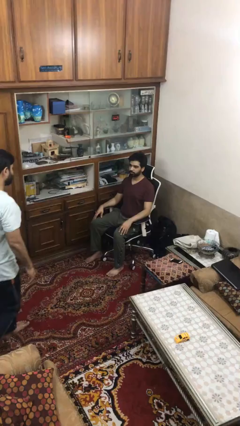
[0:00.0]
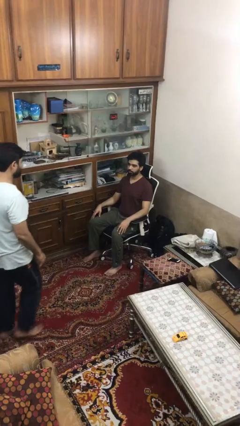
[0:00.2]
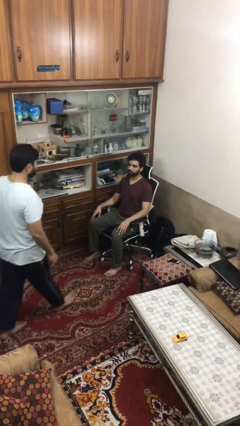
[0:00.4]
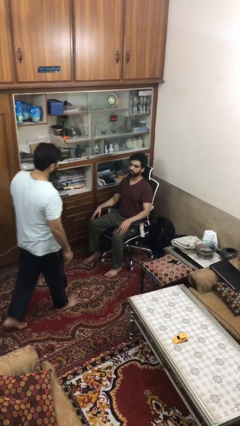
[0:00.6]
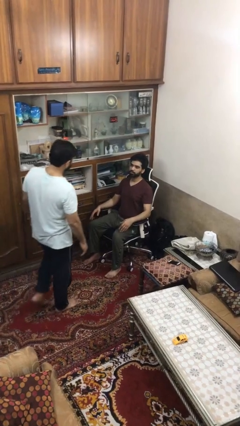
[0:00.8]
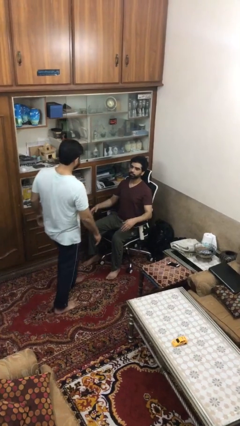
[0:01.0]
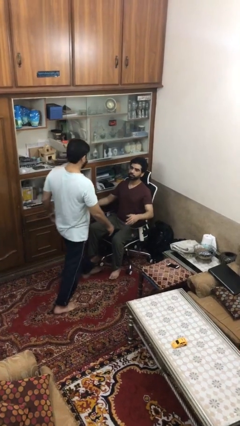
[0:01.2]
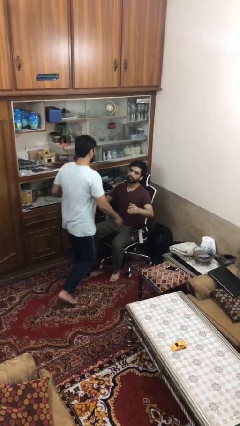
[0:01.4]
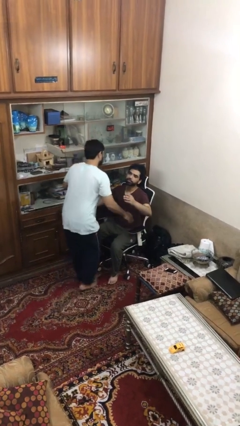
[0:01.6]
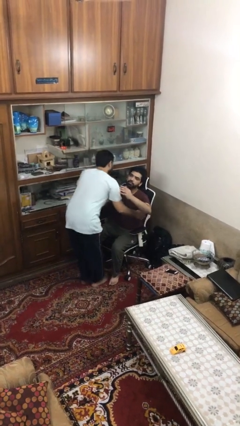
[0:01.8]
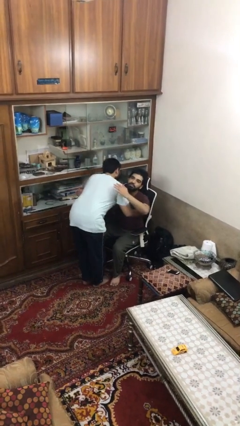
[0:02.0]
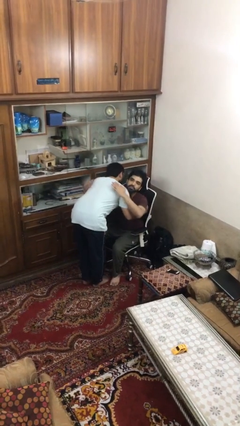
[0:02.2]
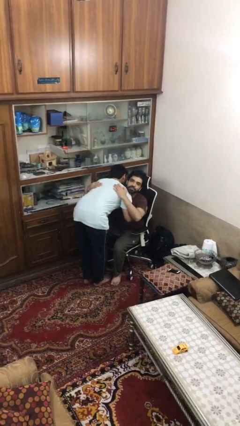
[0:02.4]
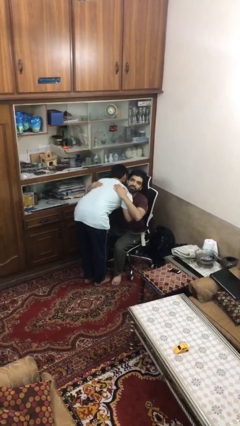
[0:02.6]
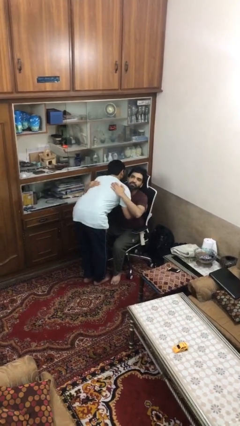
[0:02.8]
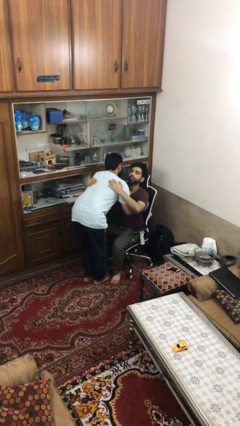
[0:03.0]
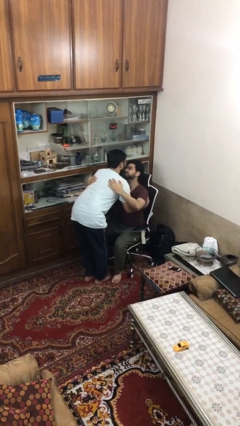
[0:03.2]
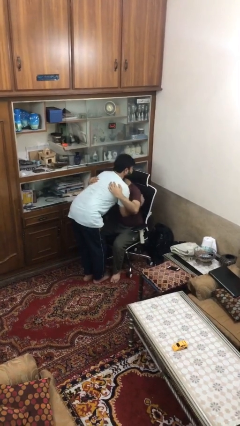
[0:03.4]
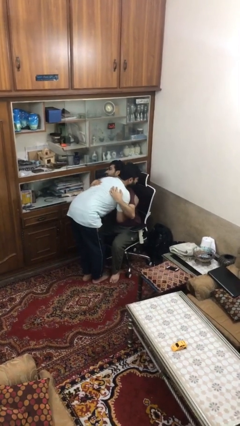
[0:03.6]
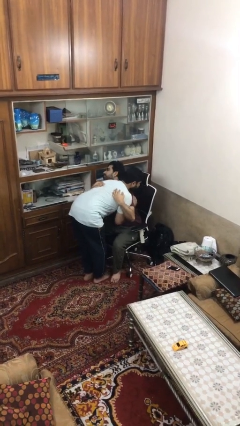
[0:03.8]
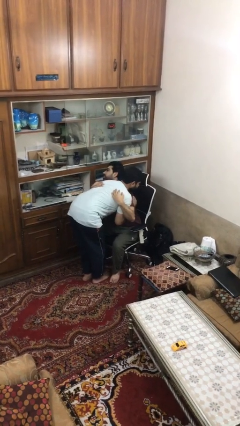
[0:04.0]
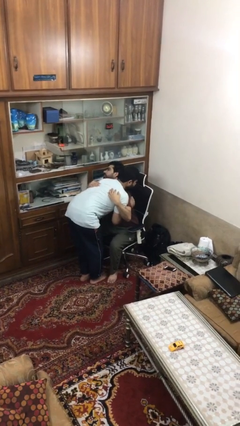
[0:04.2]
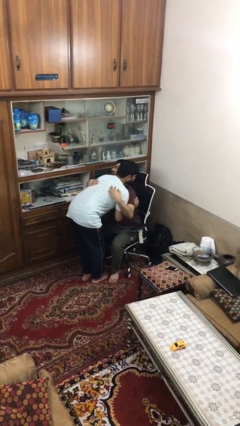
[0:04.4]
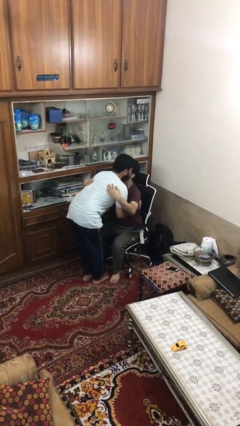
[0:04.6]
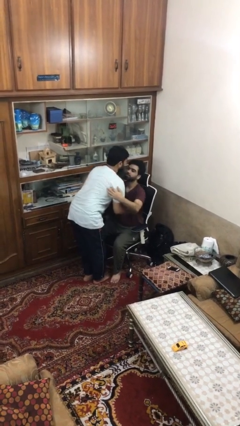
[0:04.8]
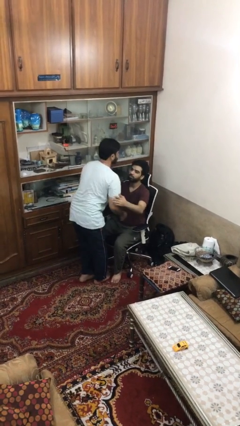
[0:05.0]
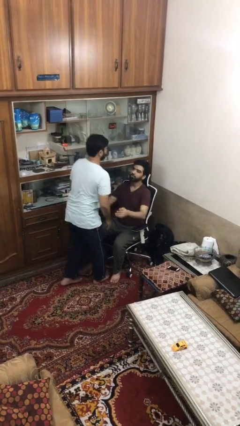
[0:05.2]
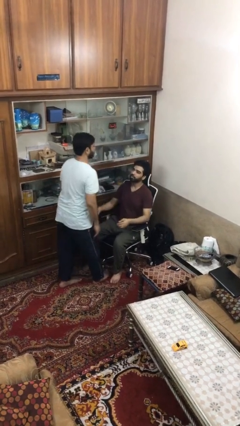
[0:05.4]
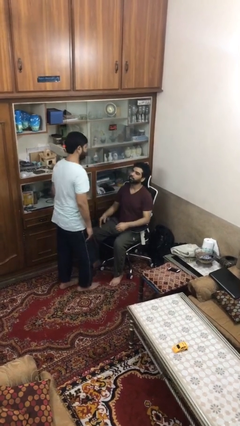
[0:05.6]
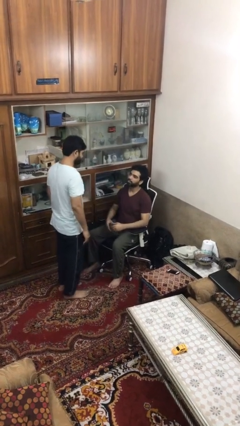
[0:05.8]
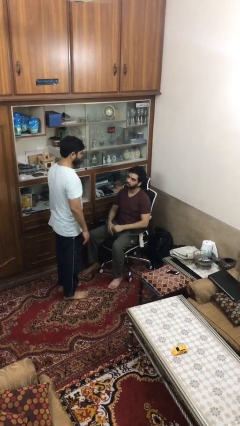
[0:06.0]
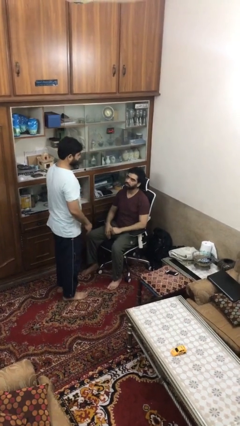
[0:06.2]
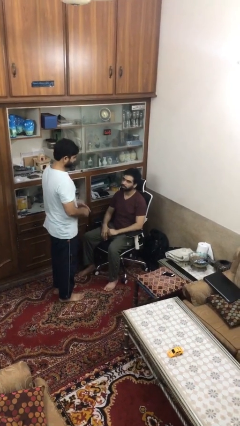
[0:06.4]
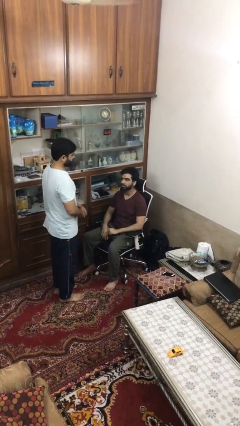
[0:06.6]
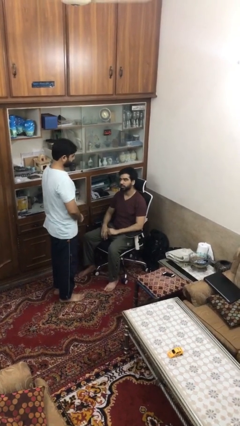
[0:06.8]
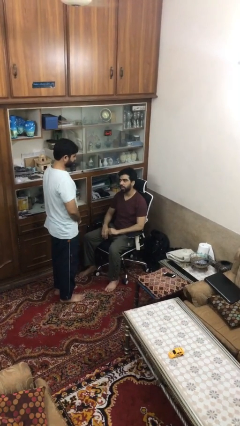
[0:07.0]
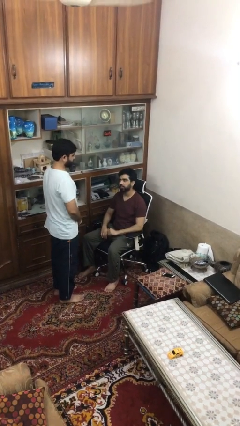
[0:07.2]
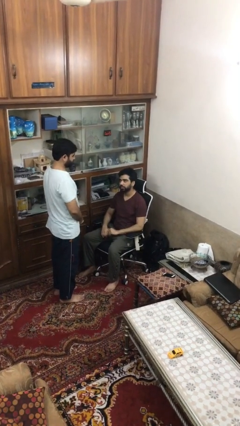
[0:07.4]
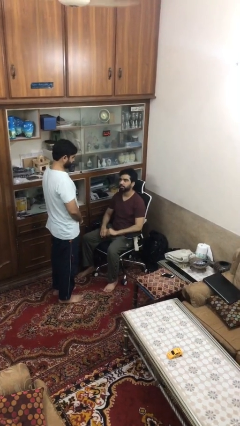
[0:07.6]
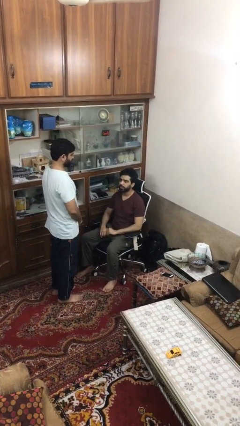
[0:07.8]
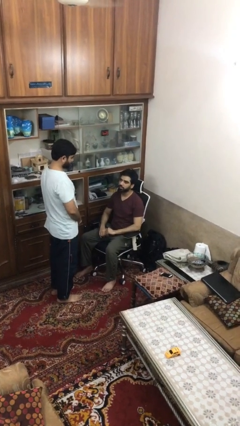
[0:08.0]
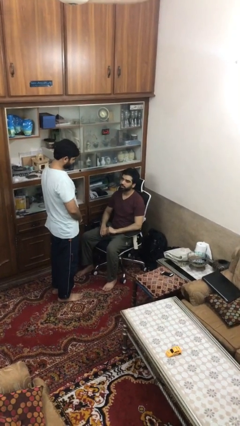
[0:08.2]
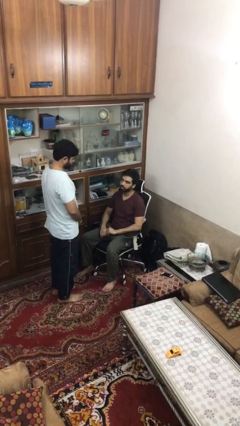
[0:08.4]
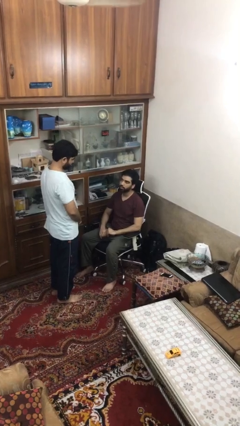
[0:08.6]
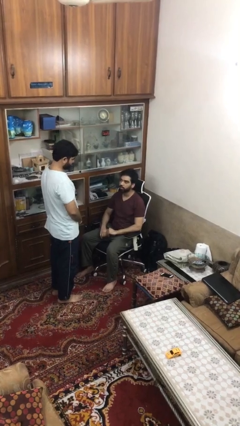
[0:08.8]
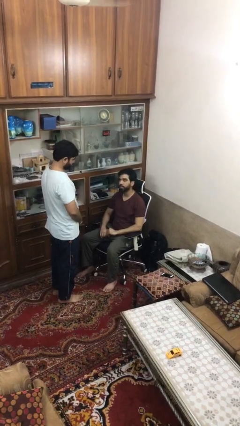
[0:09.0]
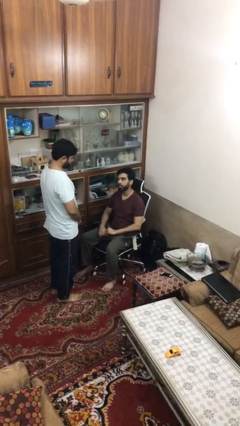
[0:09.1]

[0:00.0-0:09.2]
person embraces person

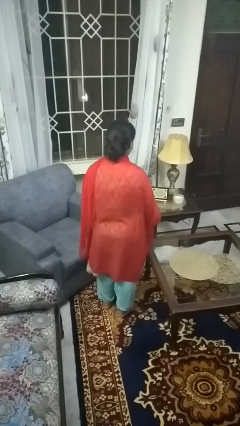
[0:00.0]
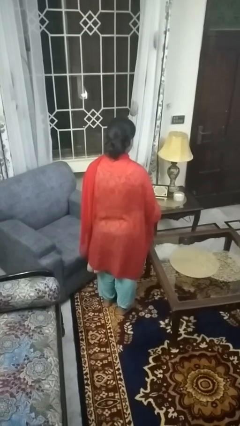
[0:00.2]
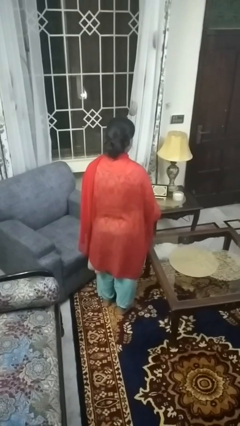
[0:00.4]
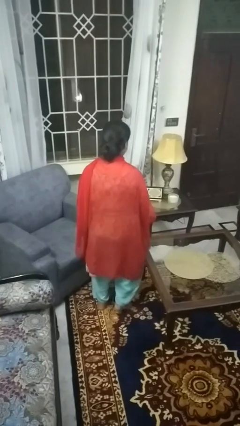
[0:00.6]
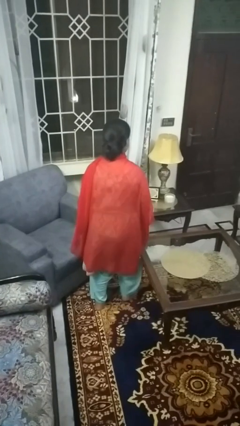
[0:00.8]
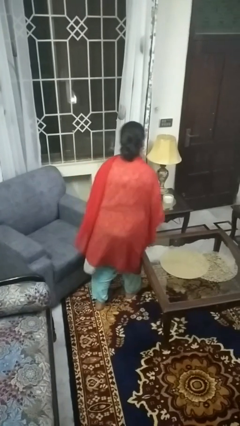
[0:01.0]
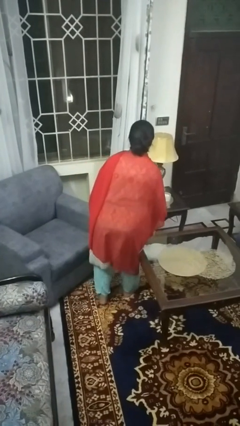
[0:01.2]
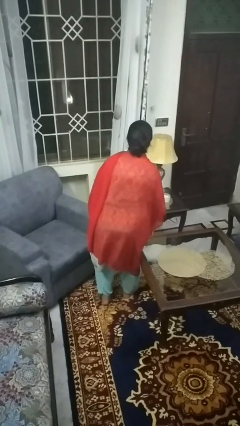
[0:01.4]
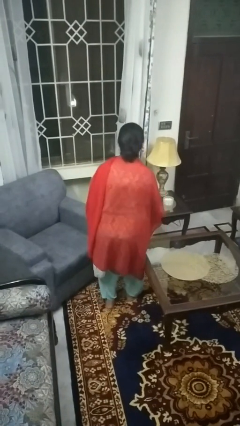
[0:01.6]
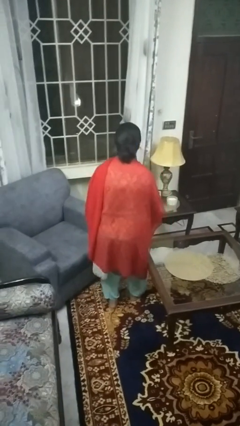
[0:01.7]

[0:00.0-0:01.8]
person bumps into table

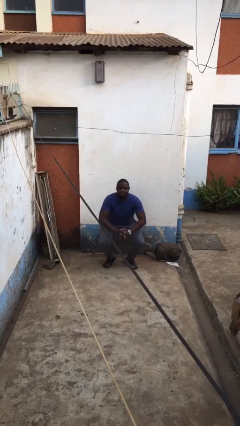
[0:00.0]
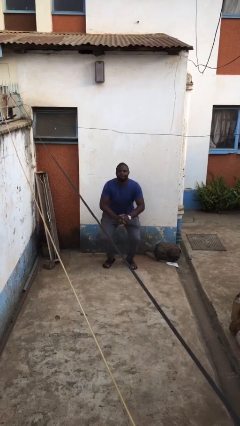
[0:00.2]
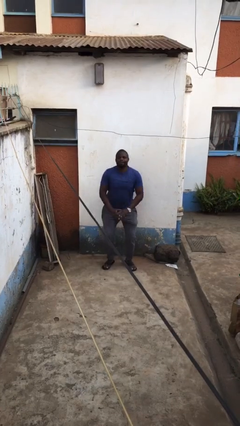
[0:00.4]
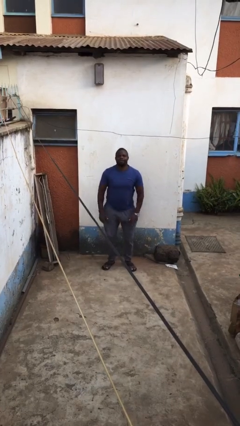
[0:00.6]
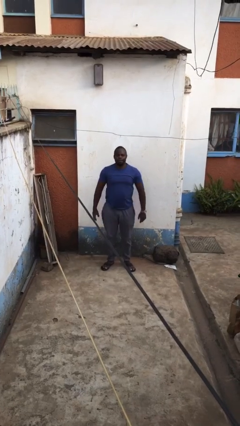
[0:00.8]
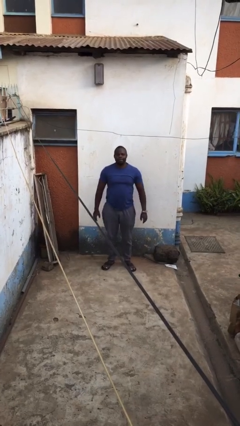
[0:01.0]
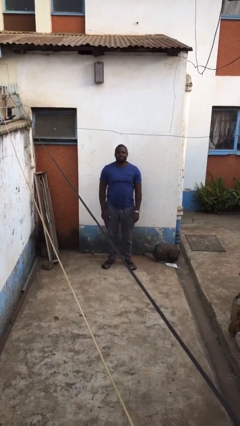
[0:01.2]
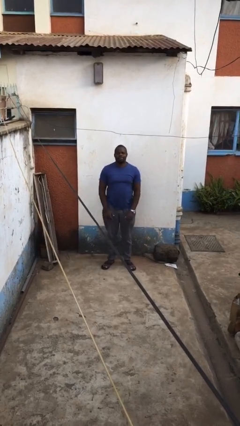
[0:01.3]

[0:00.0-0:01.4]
person stands up

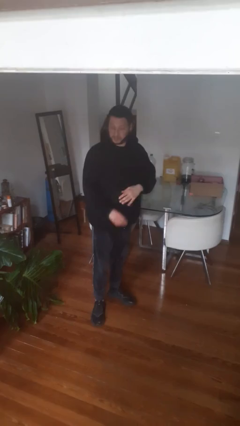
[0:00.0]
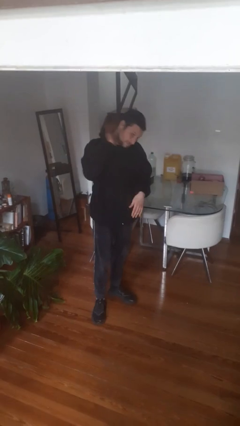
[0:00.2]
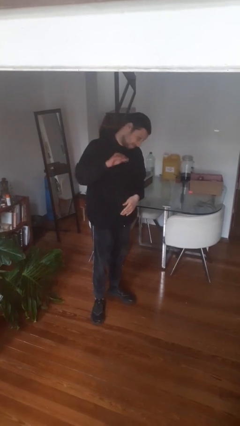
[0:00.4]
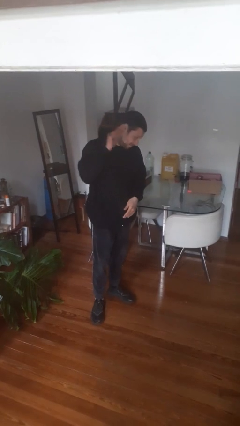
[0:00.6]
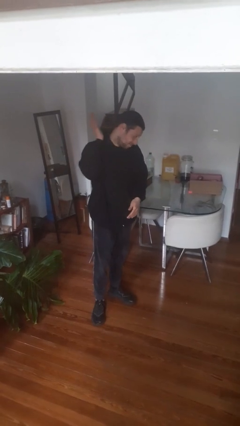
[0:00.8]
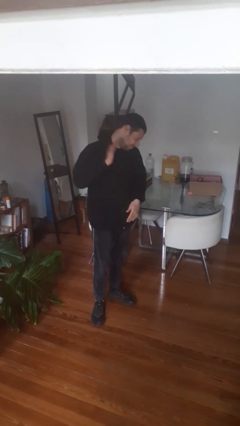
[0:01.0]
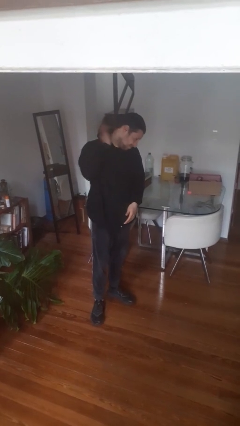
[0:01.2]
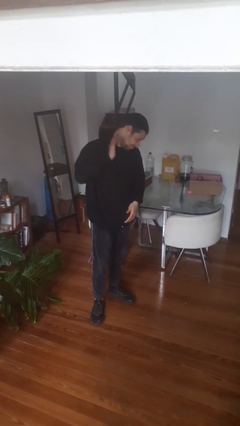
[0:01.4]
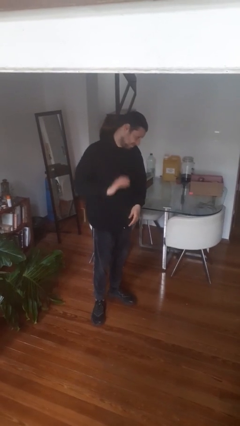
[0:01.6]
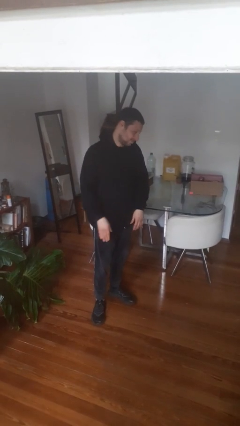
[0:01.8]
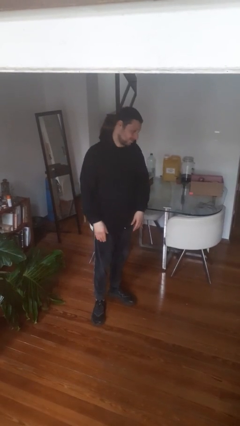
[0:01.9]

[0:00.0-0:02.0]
person swats bug

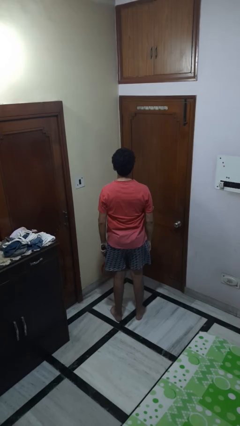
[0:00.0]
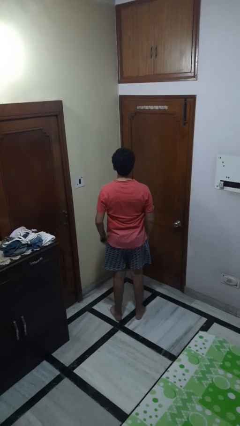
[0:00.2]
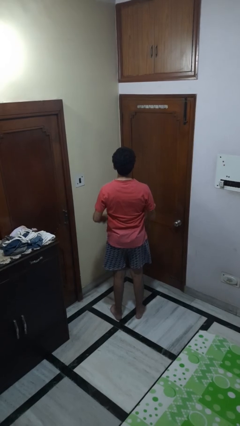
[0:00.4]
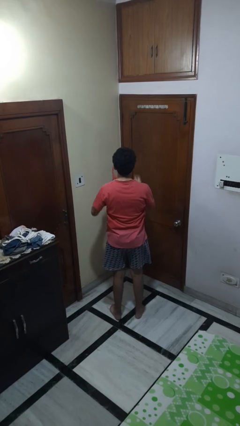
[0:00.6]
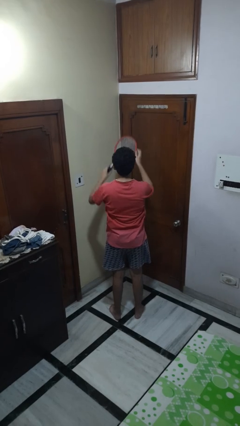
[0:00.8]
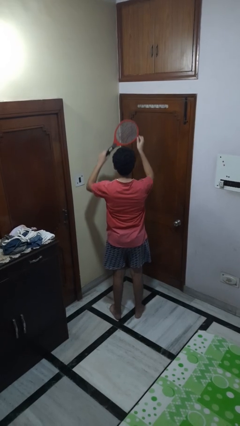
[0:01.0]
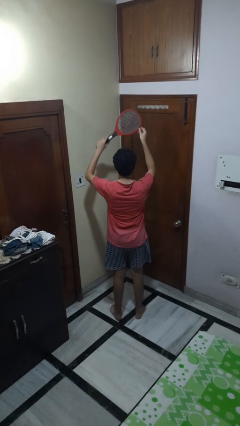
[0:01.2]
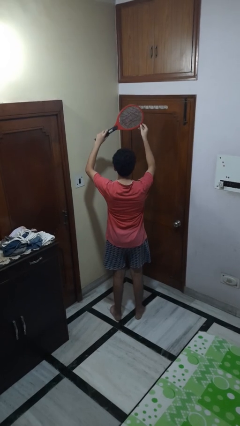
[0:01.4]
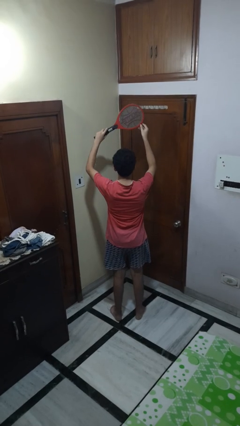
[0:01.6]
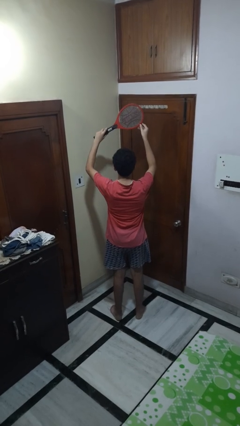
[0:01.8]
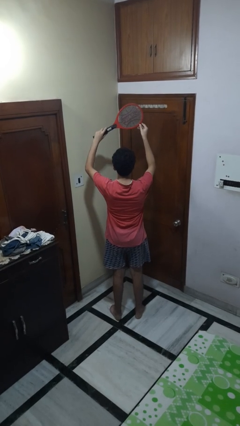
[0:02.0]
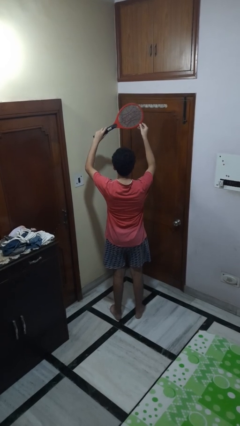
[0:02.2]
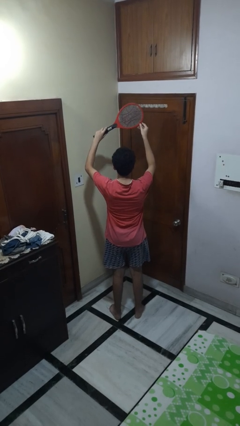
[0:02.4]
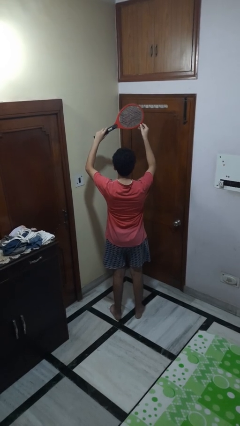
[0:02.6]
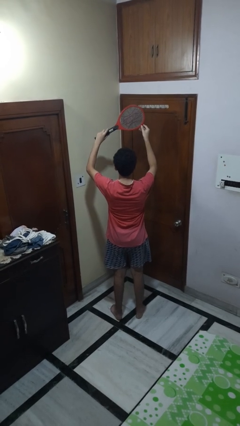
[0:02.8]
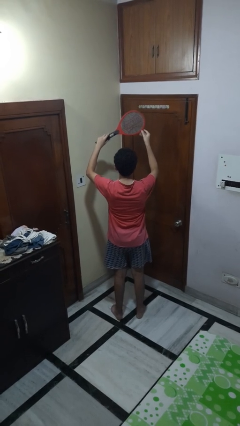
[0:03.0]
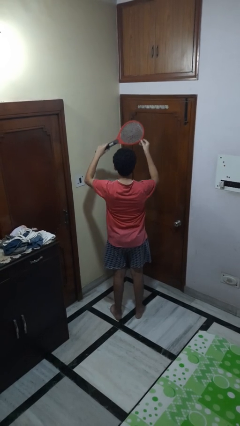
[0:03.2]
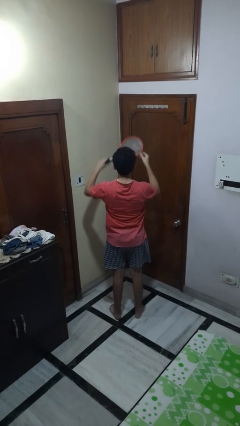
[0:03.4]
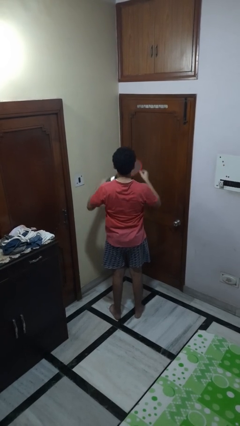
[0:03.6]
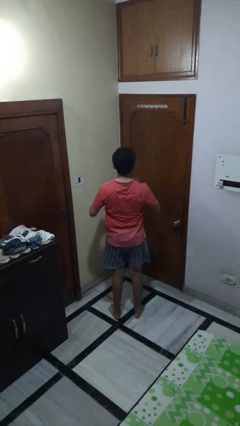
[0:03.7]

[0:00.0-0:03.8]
person holds object above head
